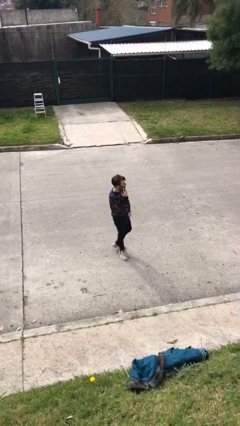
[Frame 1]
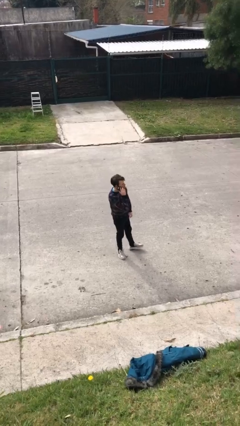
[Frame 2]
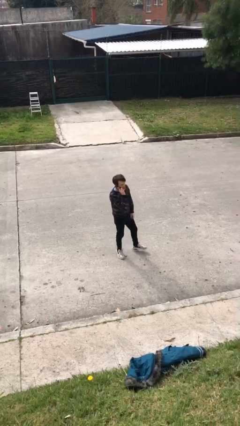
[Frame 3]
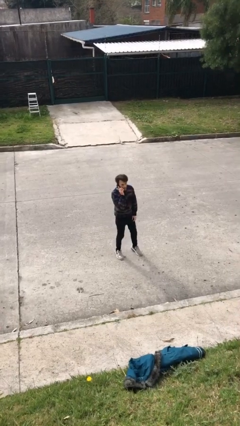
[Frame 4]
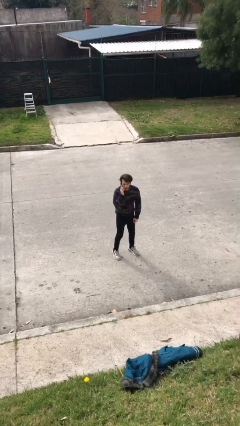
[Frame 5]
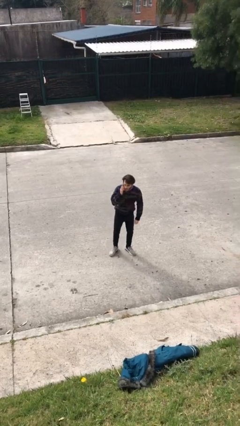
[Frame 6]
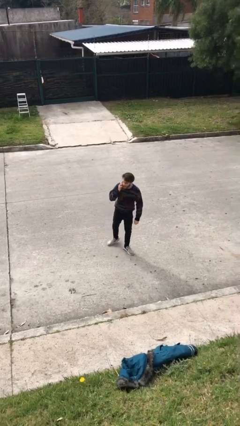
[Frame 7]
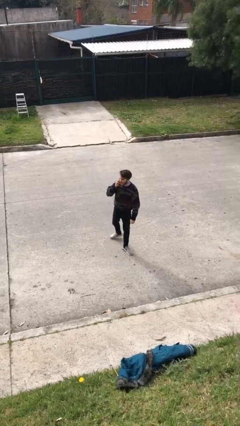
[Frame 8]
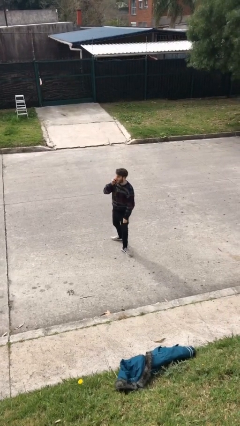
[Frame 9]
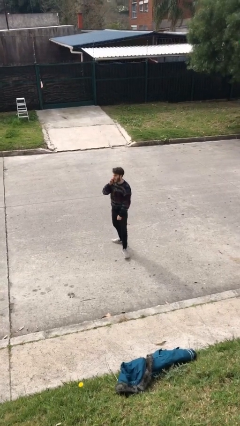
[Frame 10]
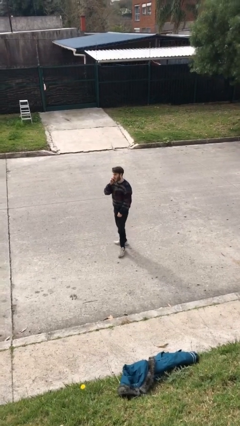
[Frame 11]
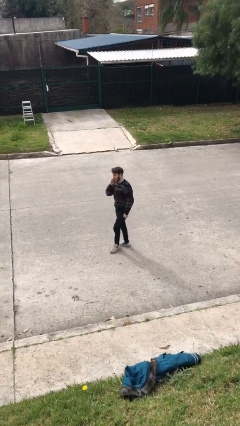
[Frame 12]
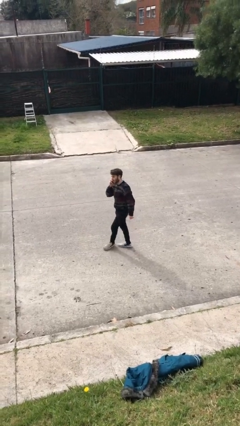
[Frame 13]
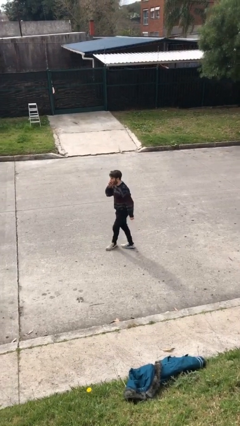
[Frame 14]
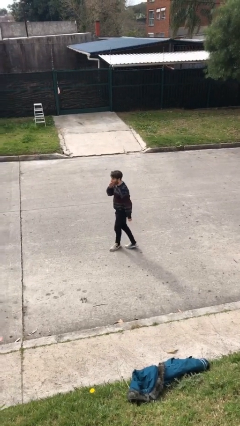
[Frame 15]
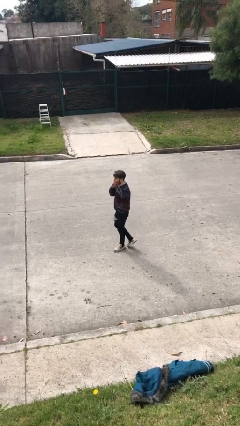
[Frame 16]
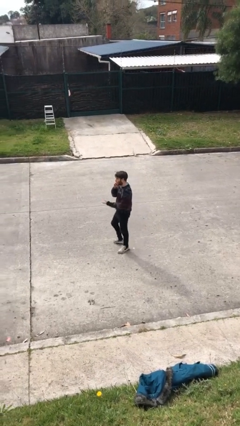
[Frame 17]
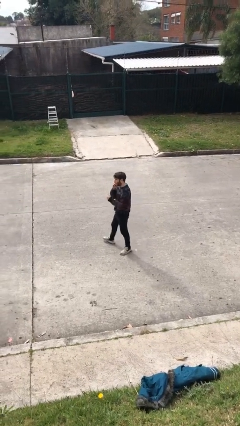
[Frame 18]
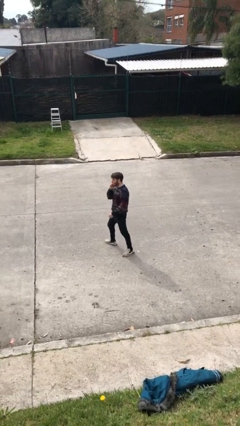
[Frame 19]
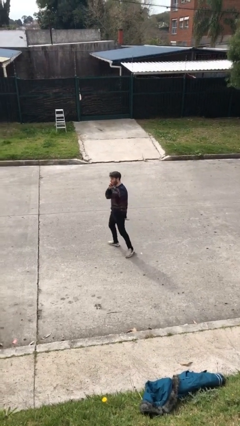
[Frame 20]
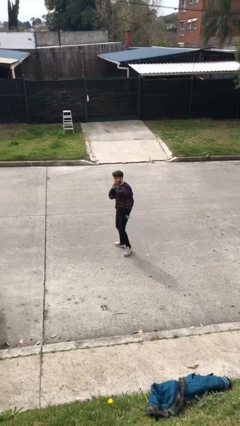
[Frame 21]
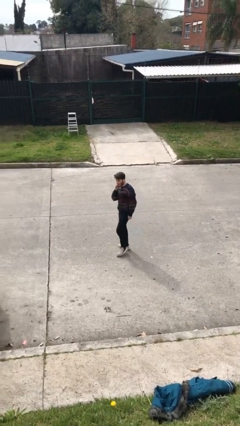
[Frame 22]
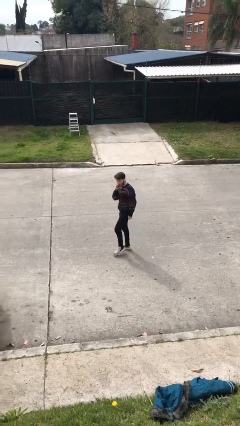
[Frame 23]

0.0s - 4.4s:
person talks on phone

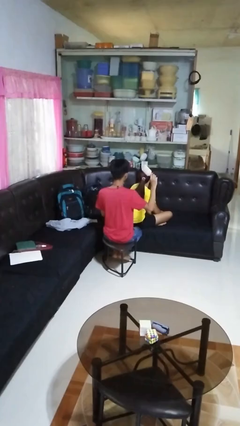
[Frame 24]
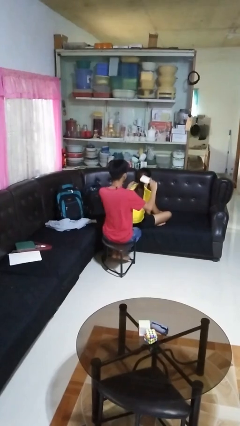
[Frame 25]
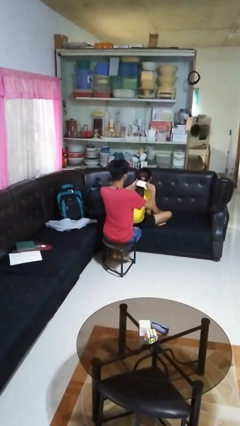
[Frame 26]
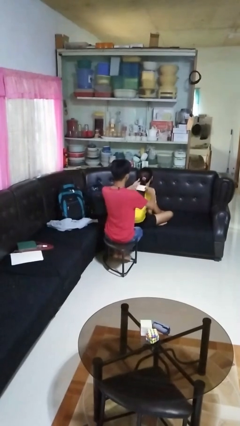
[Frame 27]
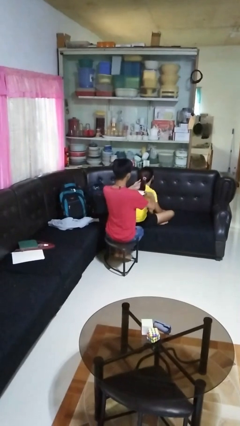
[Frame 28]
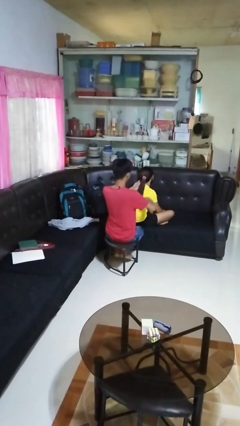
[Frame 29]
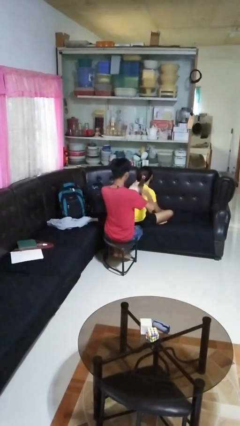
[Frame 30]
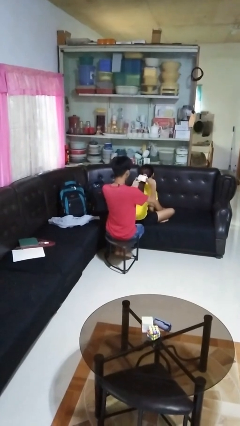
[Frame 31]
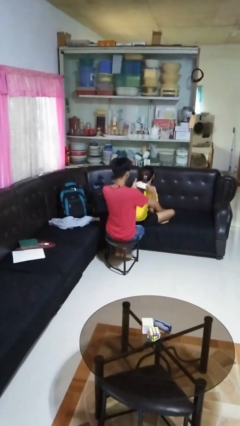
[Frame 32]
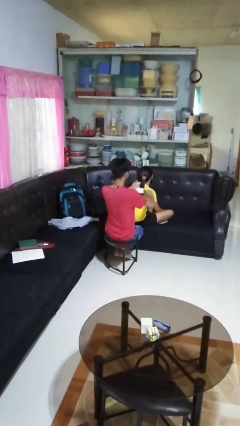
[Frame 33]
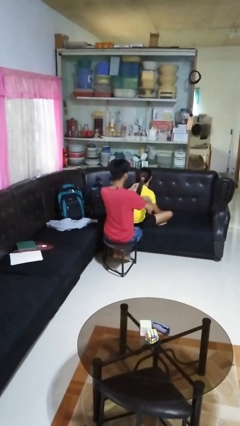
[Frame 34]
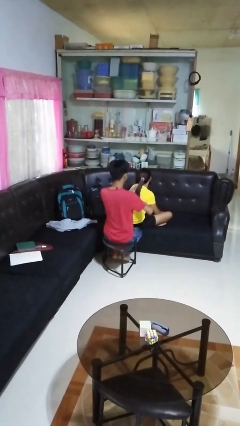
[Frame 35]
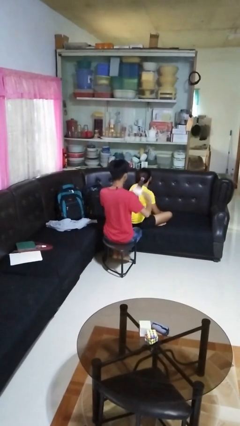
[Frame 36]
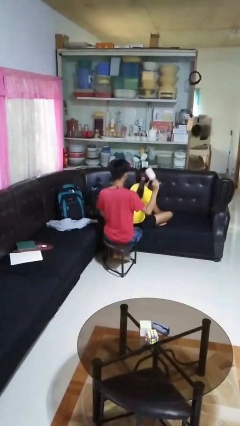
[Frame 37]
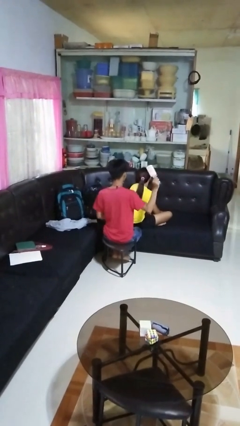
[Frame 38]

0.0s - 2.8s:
person brushes hair of person

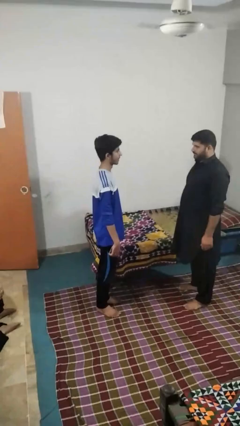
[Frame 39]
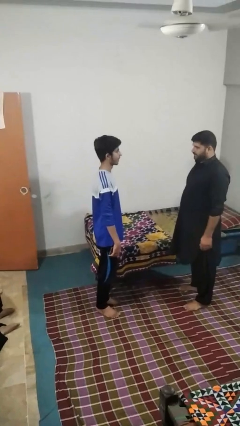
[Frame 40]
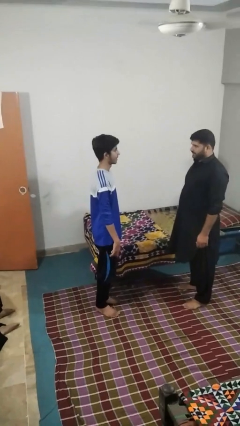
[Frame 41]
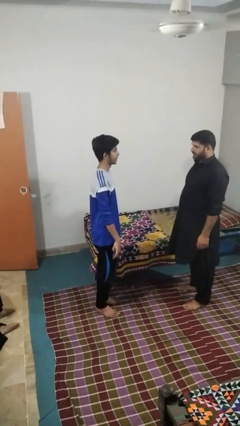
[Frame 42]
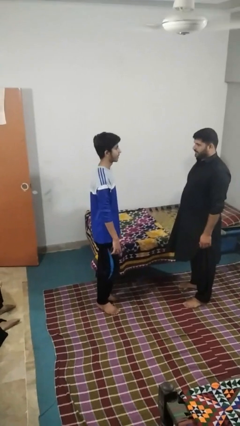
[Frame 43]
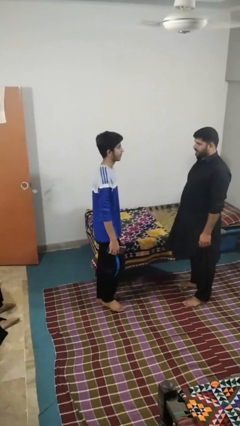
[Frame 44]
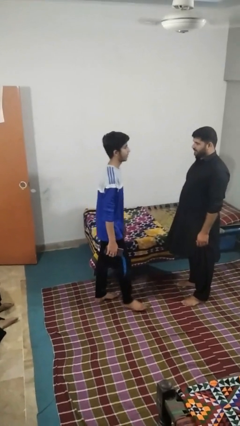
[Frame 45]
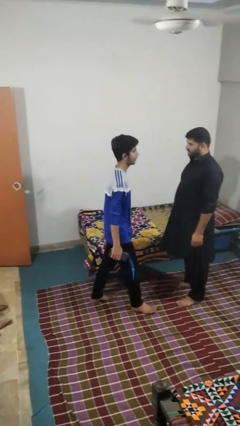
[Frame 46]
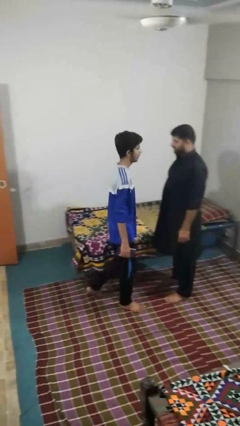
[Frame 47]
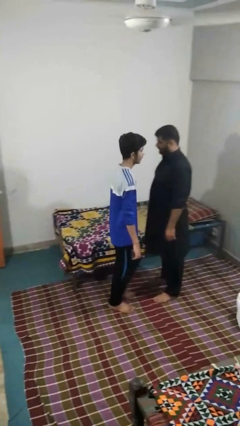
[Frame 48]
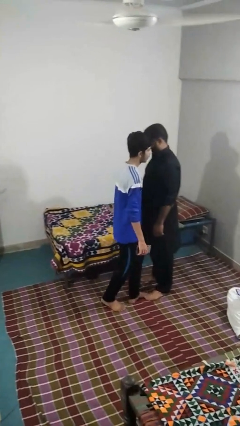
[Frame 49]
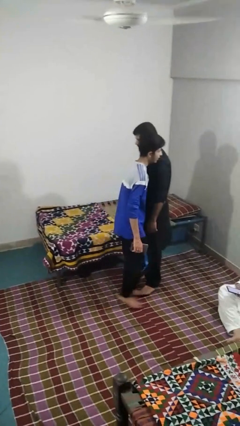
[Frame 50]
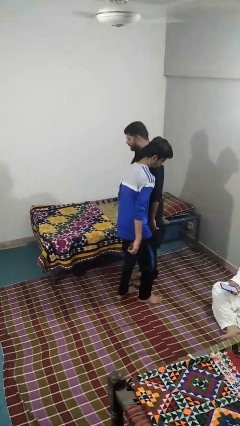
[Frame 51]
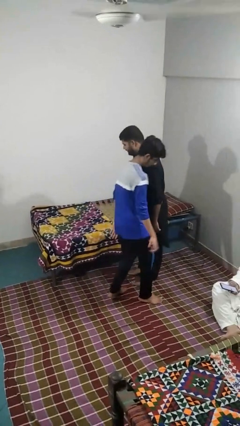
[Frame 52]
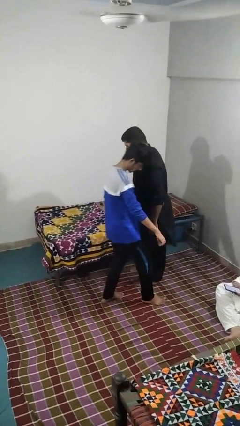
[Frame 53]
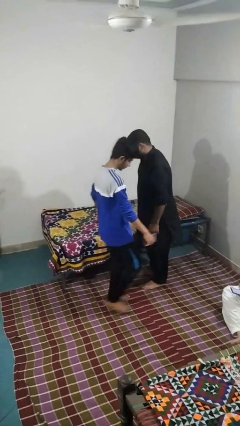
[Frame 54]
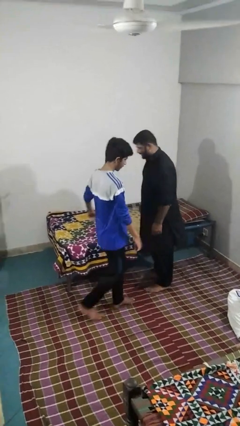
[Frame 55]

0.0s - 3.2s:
person bumps into person

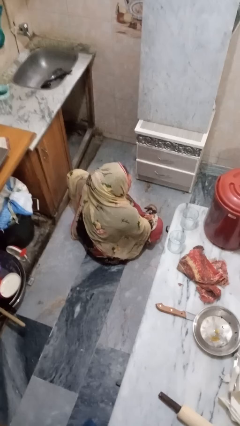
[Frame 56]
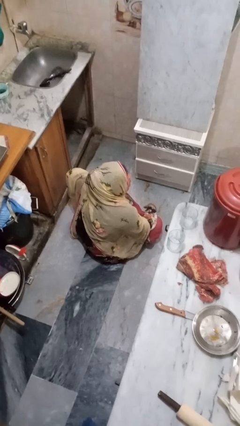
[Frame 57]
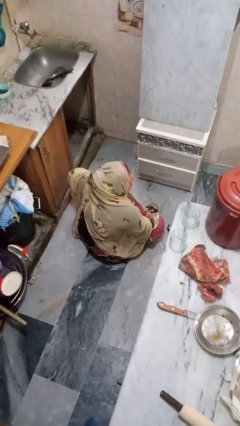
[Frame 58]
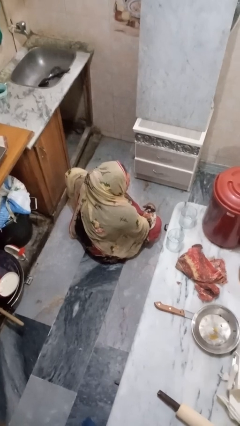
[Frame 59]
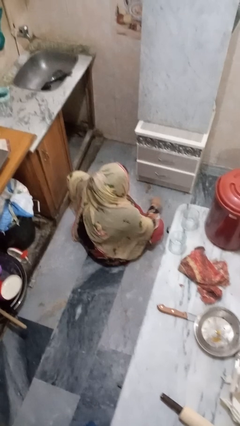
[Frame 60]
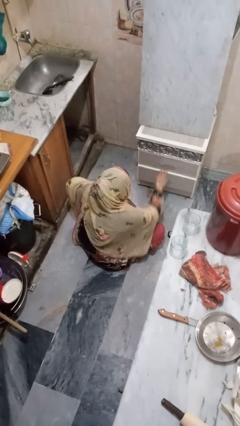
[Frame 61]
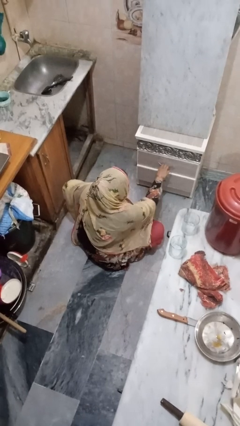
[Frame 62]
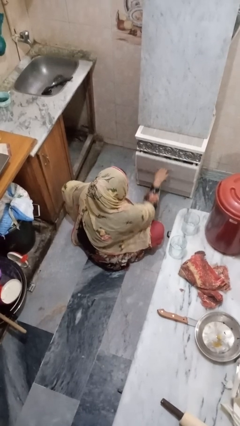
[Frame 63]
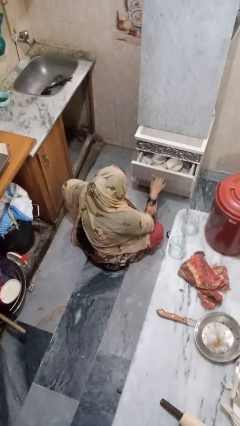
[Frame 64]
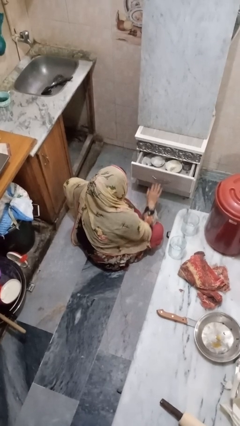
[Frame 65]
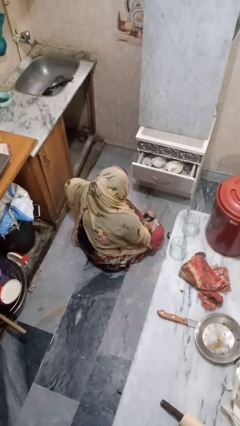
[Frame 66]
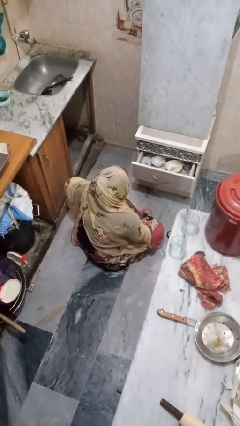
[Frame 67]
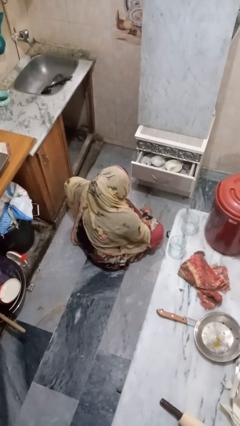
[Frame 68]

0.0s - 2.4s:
person opens kitchen drawer

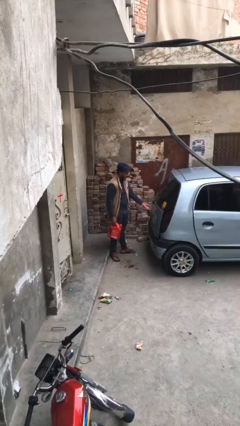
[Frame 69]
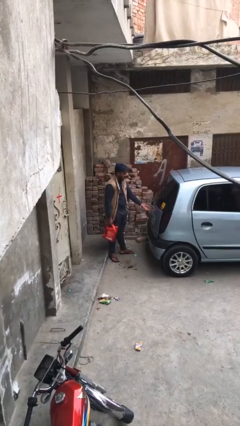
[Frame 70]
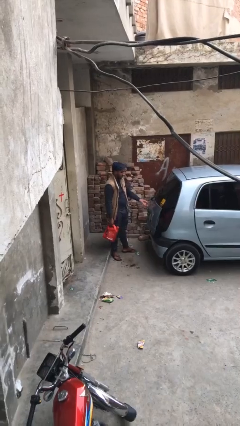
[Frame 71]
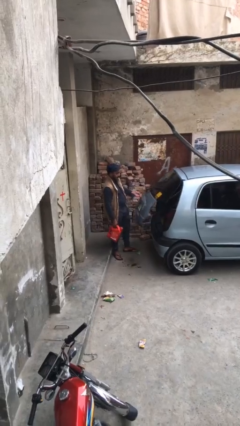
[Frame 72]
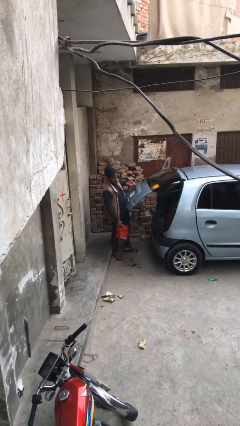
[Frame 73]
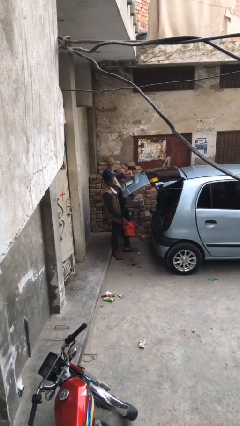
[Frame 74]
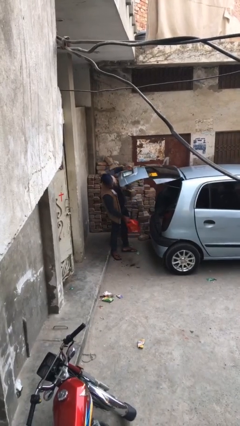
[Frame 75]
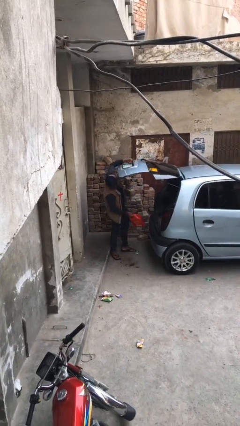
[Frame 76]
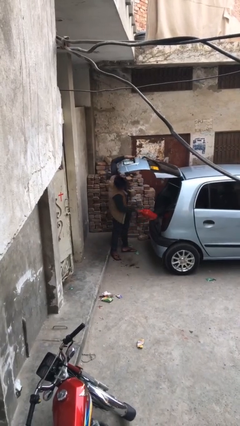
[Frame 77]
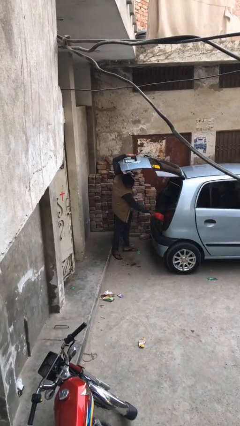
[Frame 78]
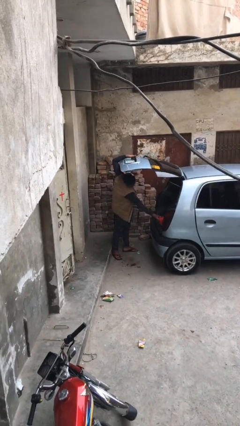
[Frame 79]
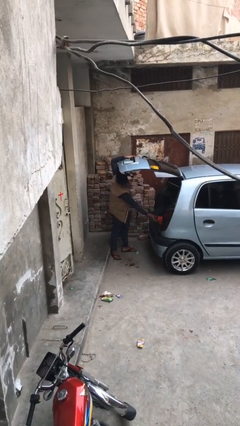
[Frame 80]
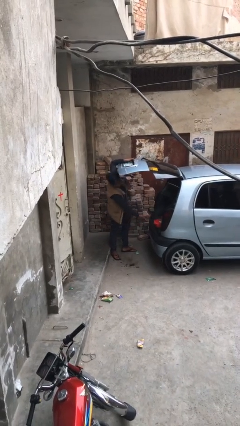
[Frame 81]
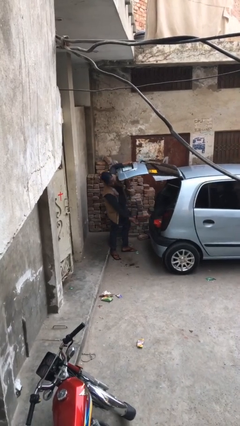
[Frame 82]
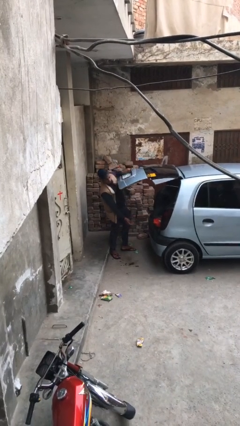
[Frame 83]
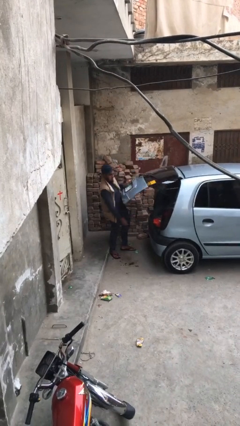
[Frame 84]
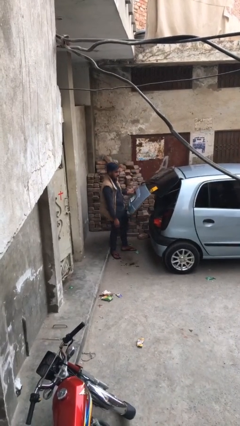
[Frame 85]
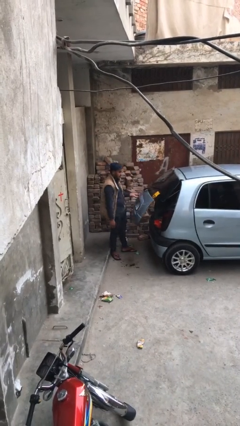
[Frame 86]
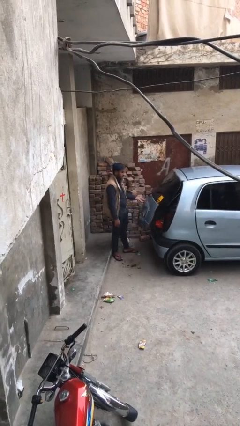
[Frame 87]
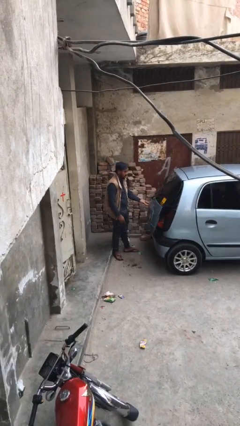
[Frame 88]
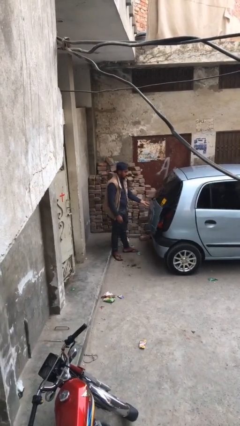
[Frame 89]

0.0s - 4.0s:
person loads car

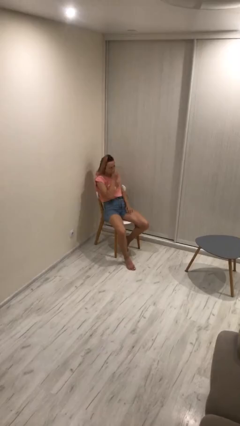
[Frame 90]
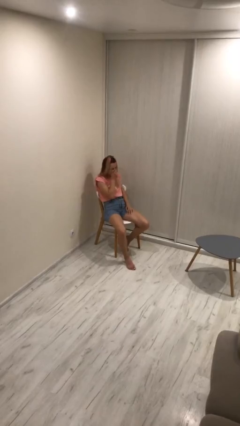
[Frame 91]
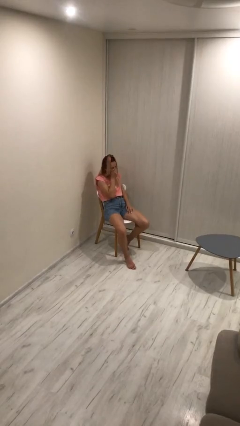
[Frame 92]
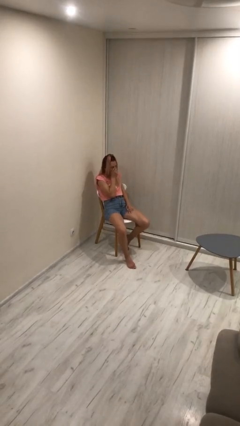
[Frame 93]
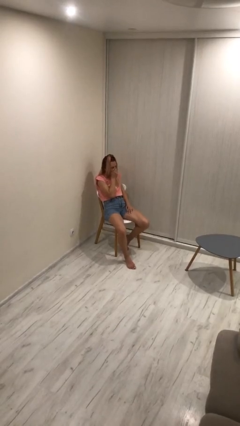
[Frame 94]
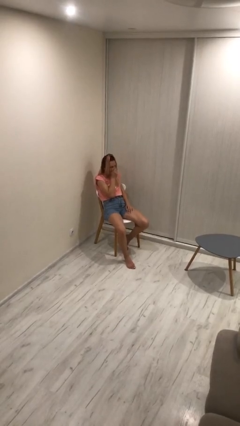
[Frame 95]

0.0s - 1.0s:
person sneezes into hand
